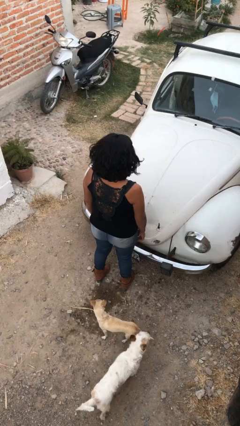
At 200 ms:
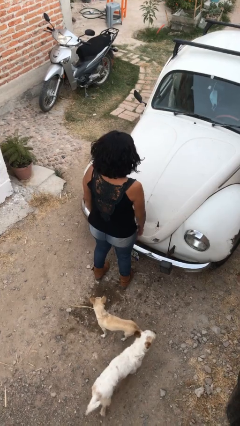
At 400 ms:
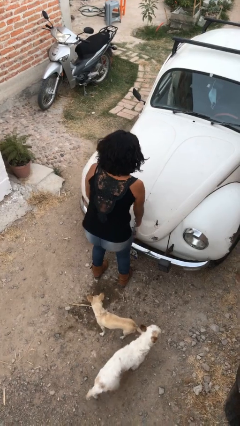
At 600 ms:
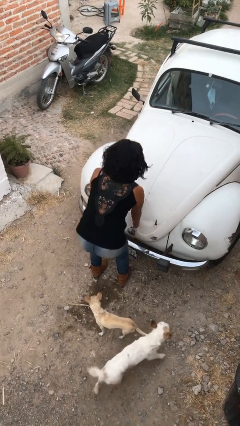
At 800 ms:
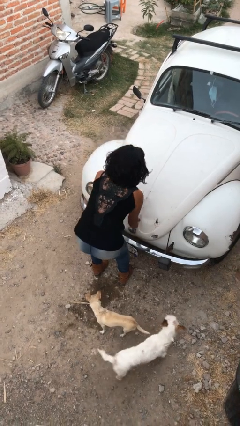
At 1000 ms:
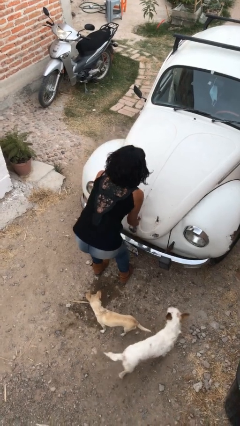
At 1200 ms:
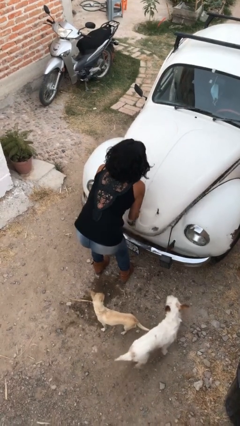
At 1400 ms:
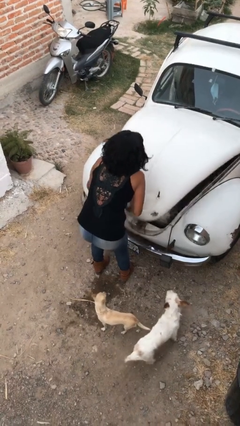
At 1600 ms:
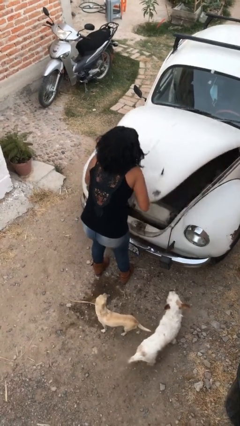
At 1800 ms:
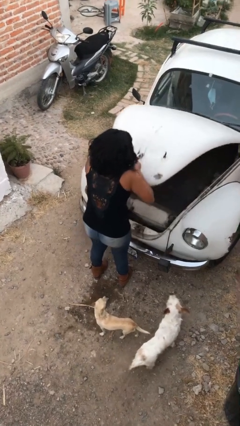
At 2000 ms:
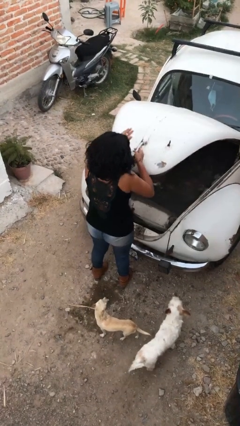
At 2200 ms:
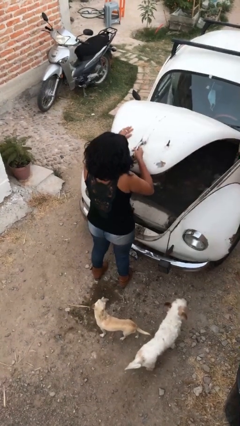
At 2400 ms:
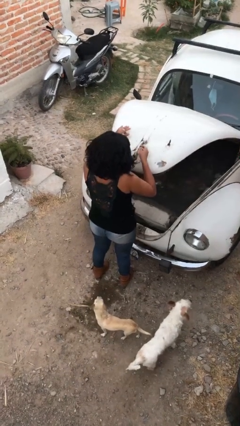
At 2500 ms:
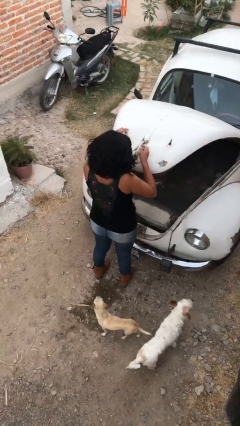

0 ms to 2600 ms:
person opens car trunk

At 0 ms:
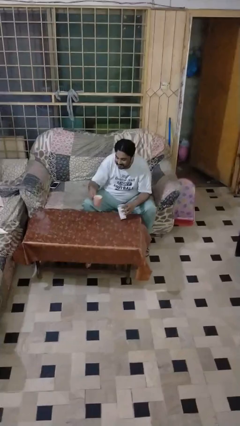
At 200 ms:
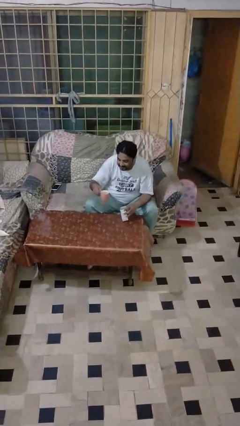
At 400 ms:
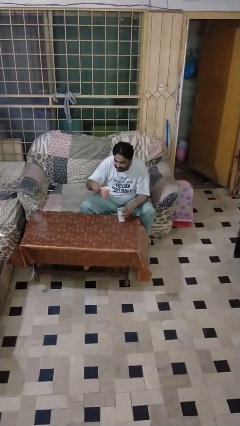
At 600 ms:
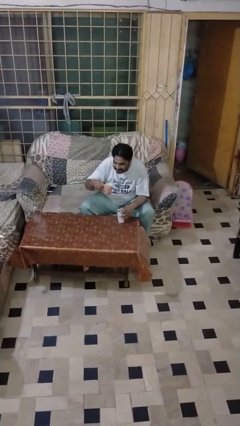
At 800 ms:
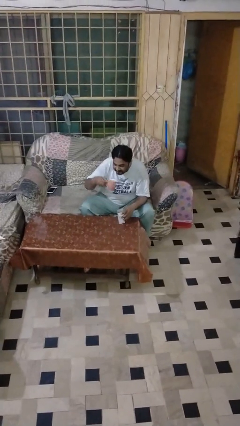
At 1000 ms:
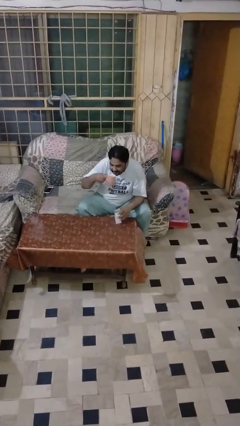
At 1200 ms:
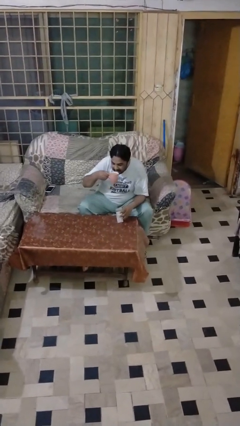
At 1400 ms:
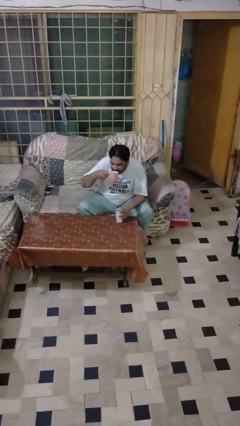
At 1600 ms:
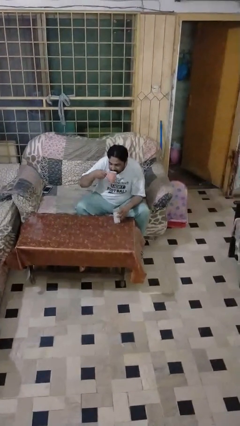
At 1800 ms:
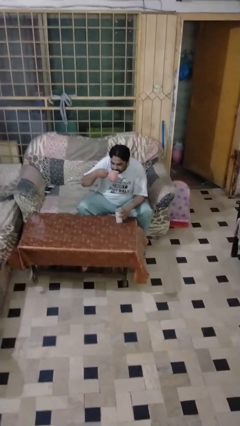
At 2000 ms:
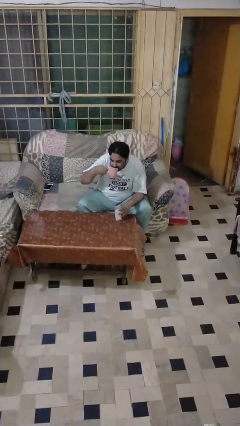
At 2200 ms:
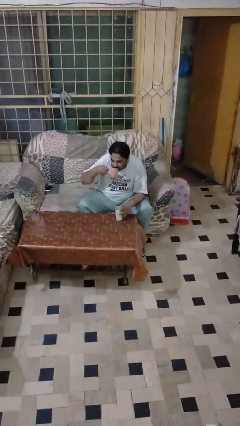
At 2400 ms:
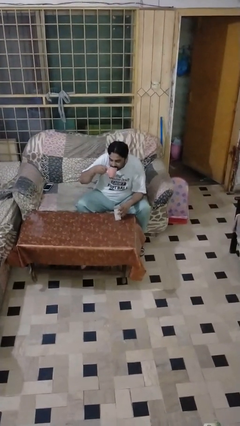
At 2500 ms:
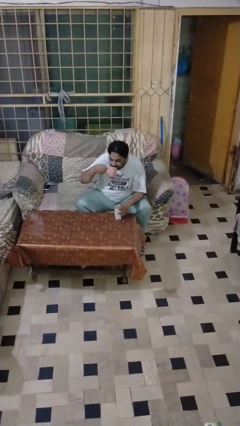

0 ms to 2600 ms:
person drinks from cup

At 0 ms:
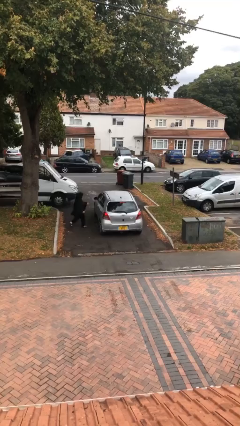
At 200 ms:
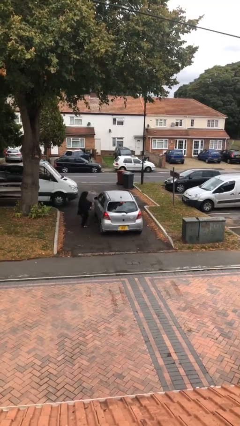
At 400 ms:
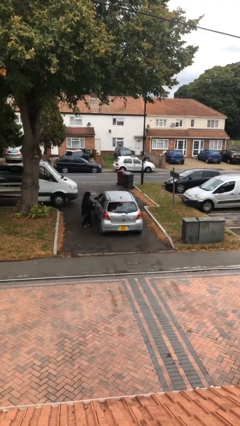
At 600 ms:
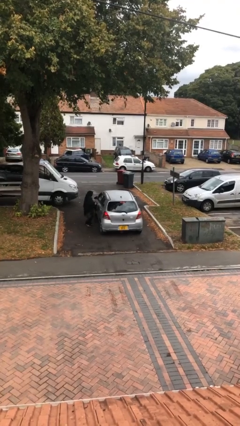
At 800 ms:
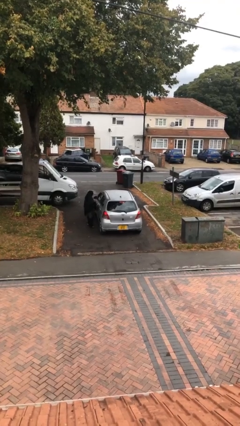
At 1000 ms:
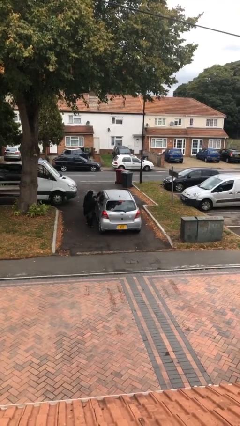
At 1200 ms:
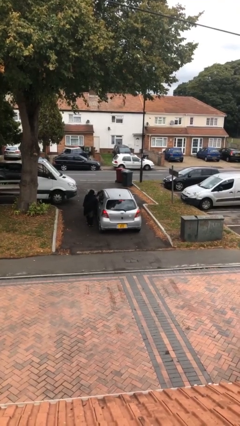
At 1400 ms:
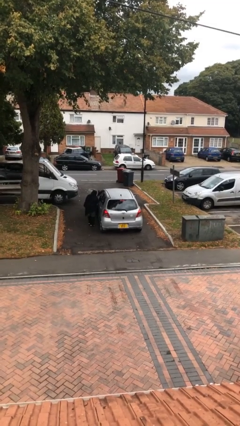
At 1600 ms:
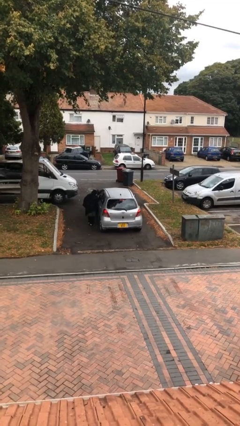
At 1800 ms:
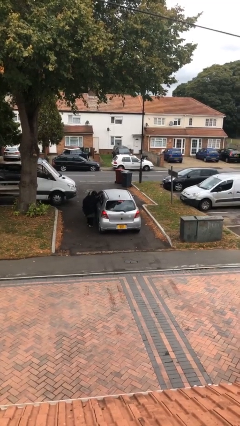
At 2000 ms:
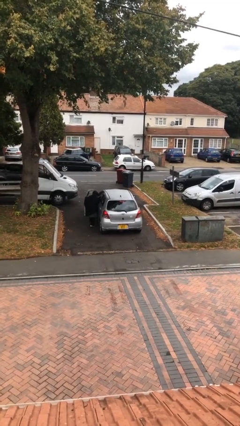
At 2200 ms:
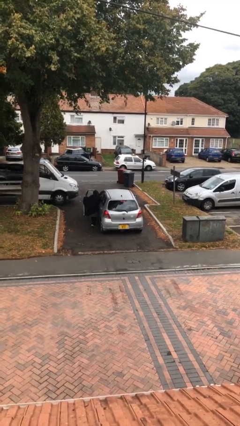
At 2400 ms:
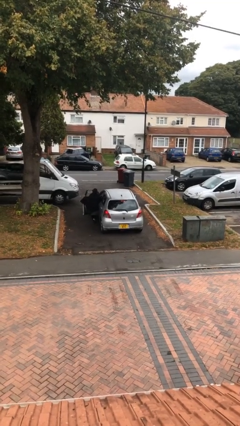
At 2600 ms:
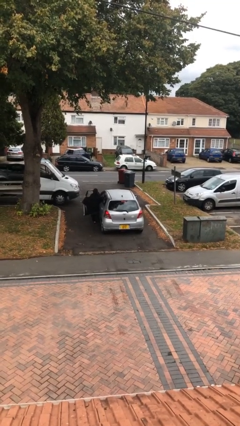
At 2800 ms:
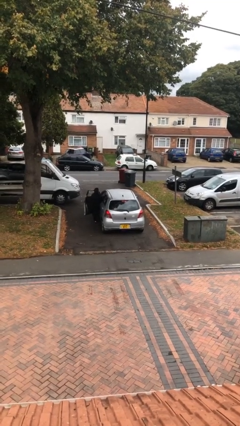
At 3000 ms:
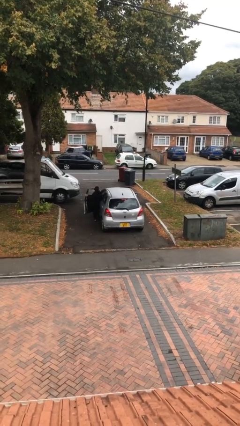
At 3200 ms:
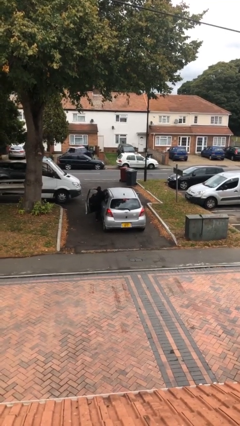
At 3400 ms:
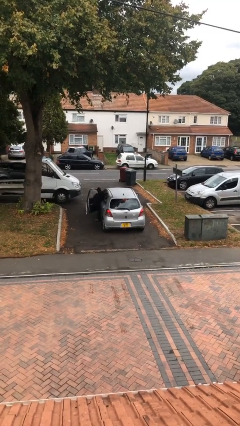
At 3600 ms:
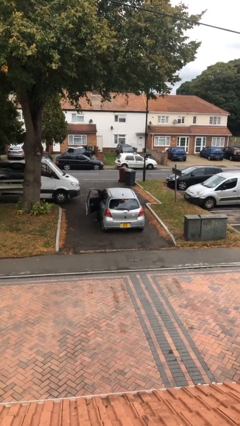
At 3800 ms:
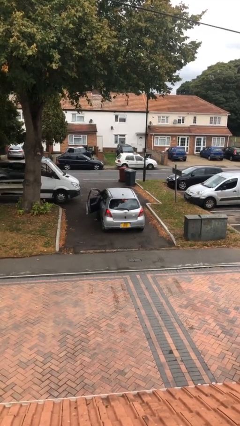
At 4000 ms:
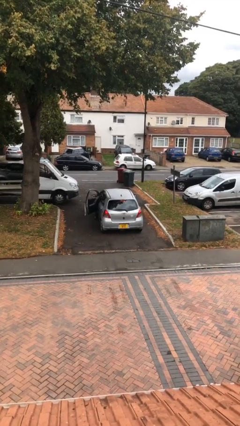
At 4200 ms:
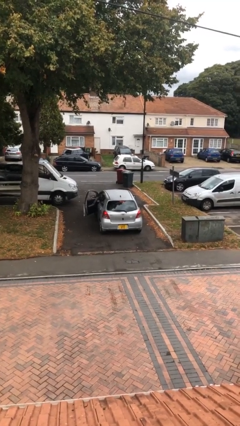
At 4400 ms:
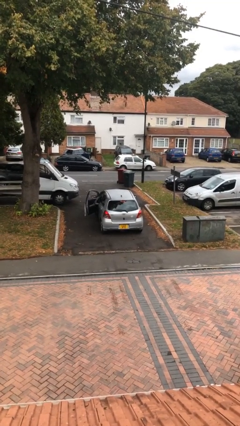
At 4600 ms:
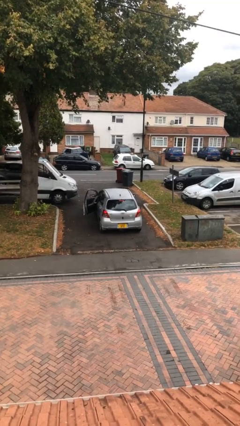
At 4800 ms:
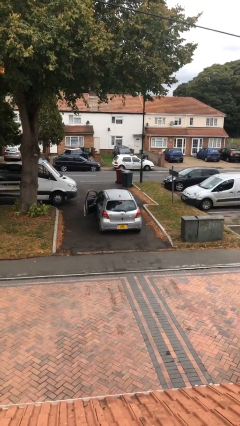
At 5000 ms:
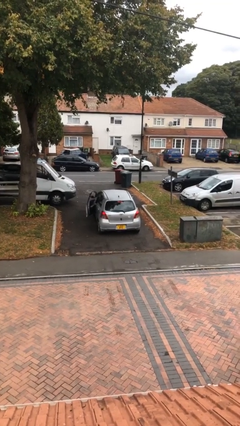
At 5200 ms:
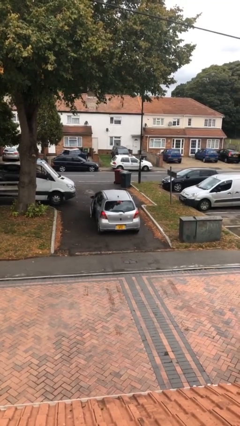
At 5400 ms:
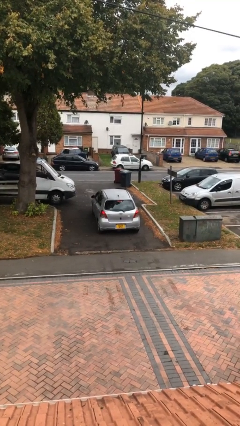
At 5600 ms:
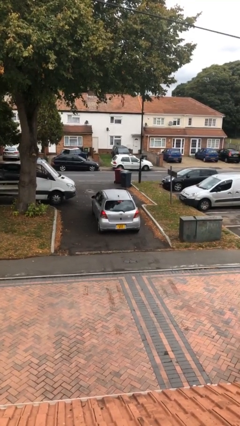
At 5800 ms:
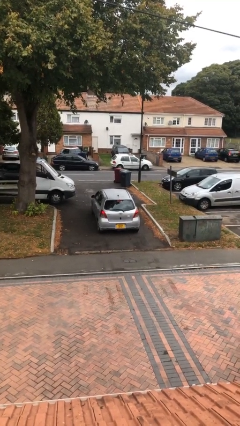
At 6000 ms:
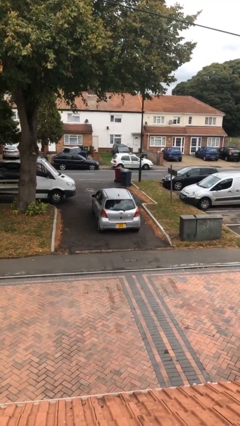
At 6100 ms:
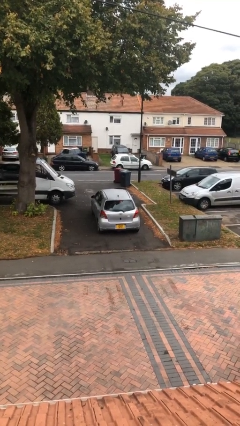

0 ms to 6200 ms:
car picks up person

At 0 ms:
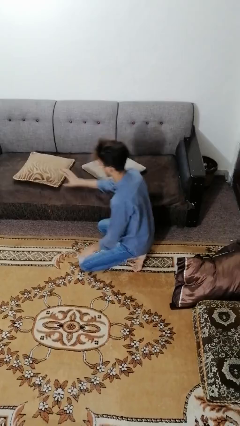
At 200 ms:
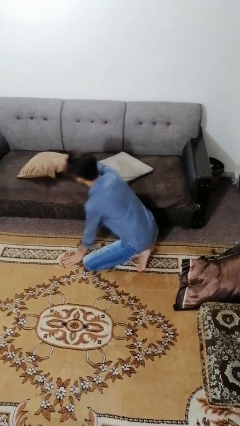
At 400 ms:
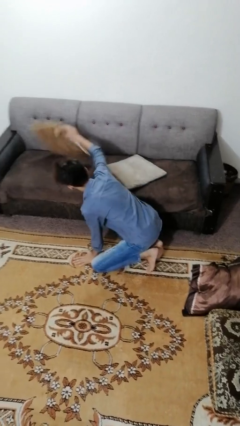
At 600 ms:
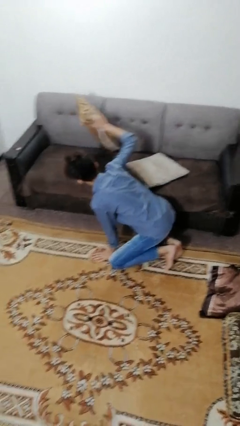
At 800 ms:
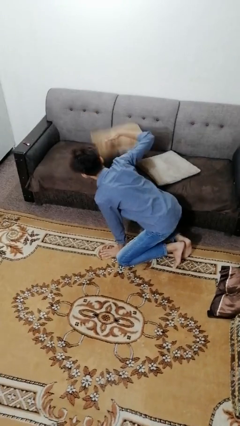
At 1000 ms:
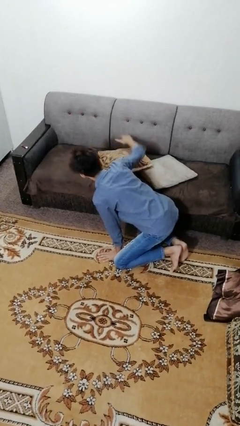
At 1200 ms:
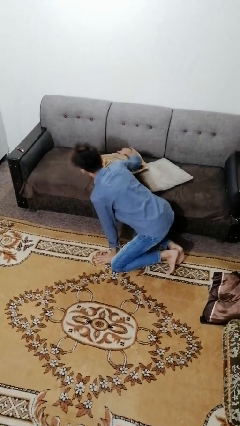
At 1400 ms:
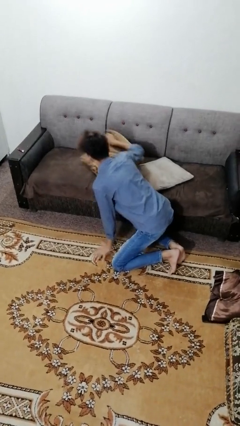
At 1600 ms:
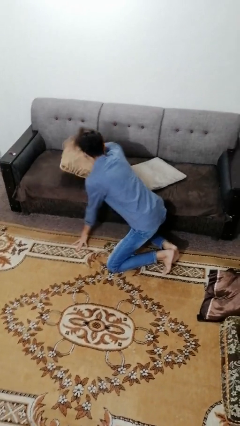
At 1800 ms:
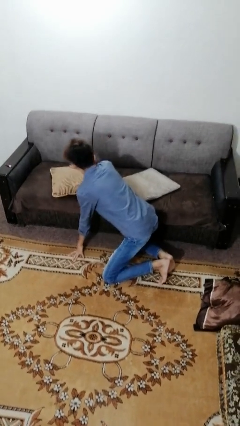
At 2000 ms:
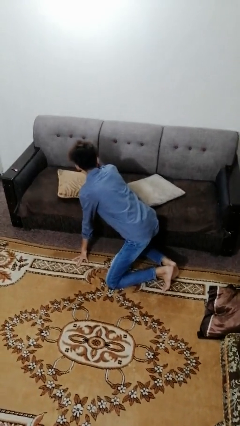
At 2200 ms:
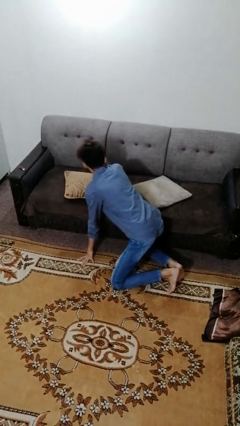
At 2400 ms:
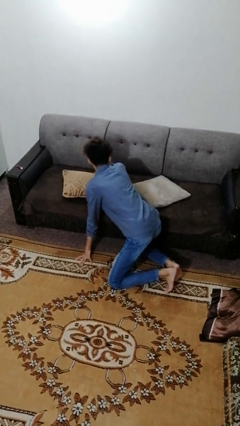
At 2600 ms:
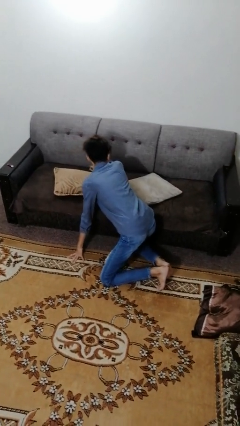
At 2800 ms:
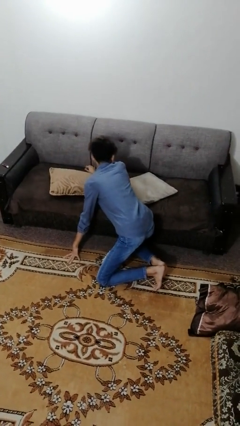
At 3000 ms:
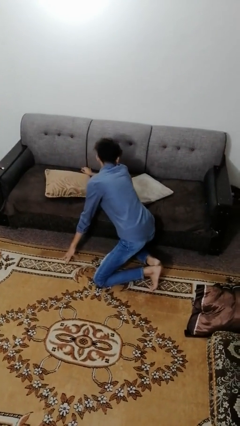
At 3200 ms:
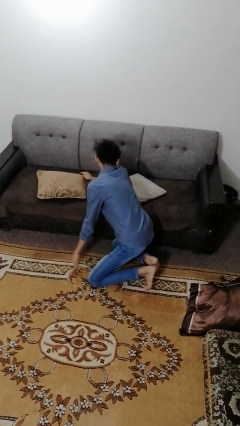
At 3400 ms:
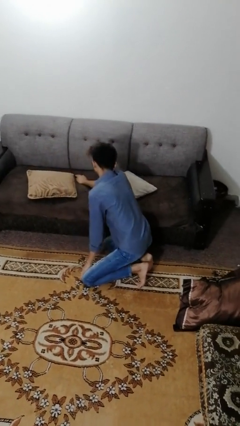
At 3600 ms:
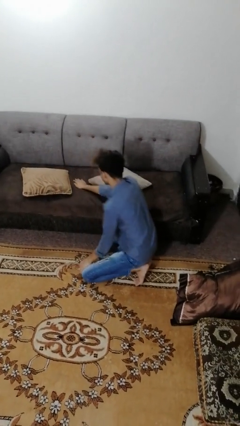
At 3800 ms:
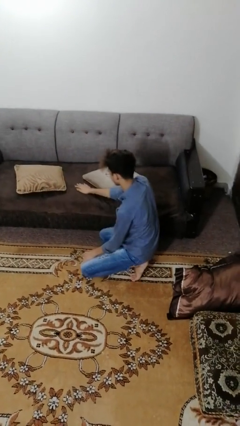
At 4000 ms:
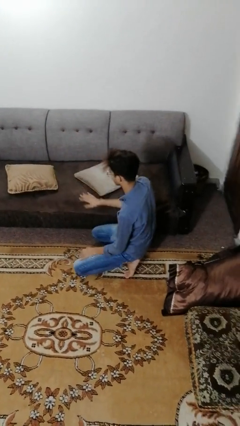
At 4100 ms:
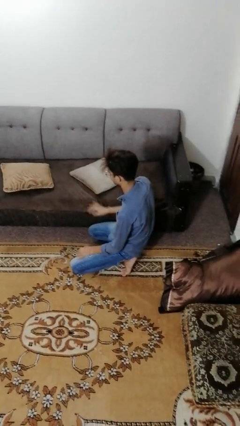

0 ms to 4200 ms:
person searches in couch

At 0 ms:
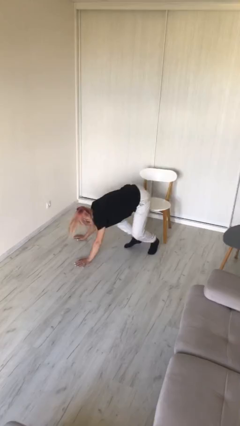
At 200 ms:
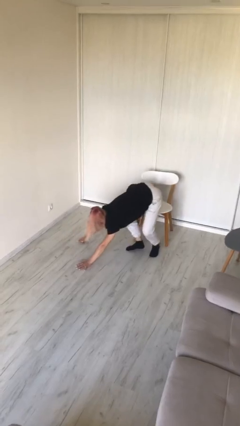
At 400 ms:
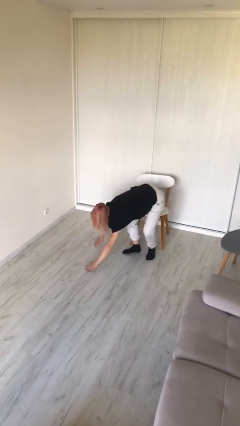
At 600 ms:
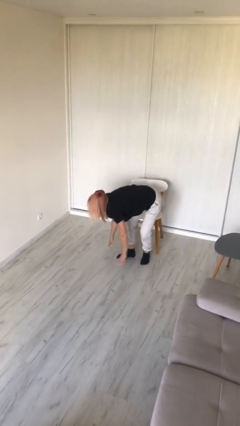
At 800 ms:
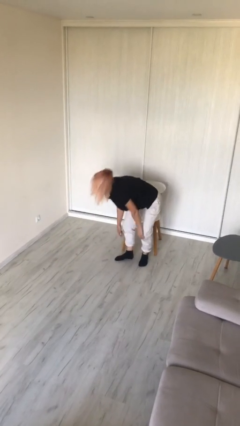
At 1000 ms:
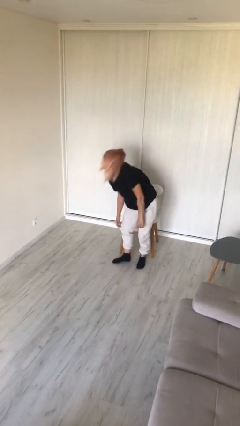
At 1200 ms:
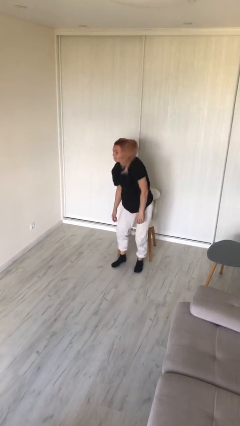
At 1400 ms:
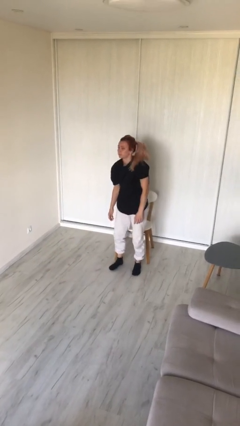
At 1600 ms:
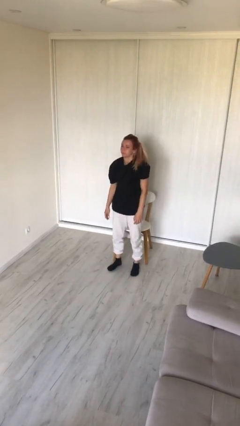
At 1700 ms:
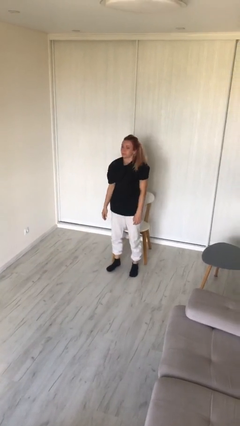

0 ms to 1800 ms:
person stands up from floor
